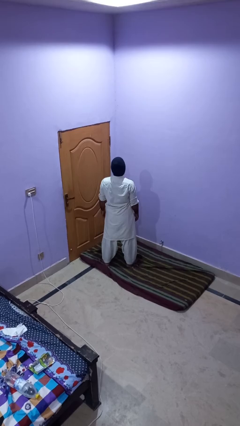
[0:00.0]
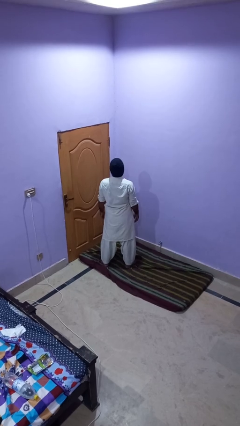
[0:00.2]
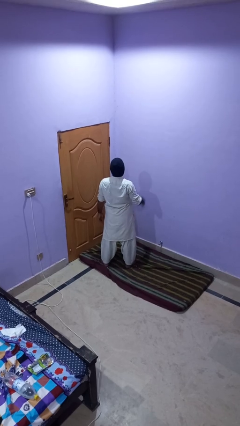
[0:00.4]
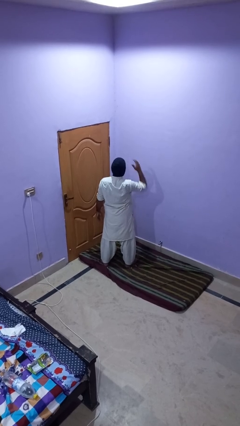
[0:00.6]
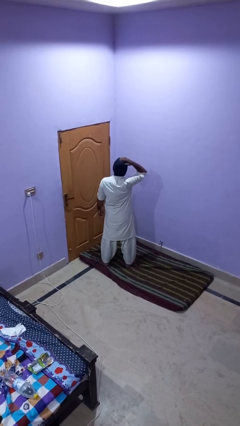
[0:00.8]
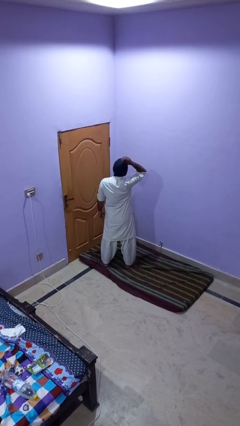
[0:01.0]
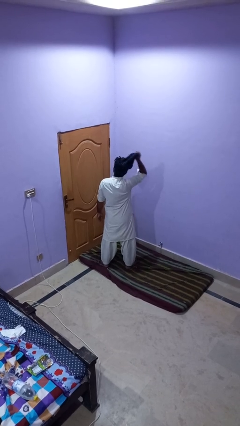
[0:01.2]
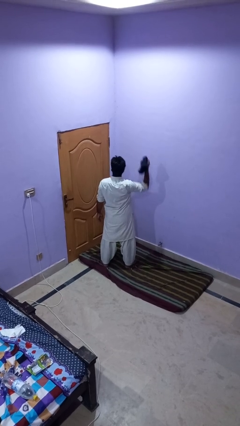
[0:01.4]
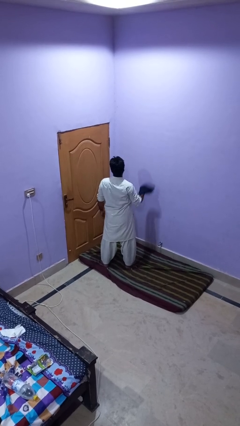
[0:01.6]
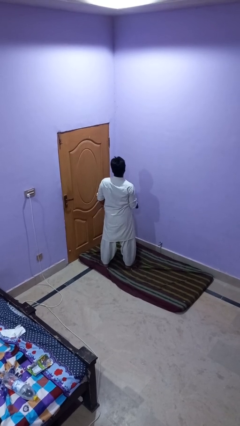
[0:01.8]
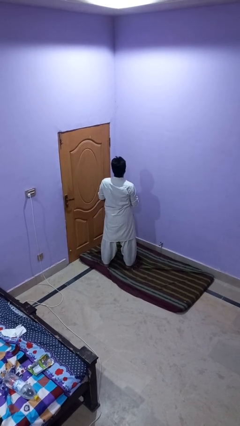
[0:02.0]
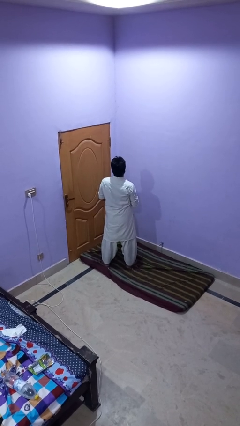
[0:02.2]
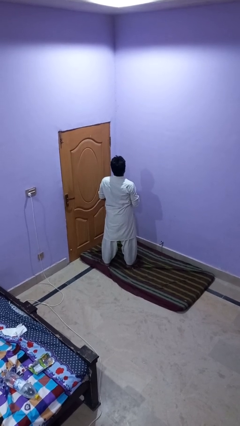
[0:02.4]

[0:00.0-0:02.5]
person takes off hat

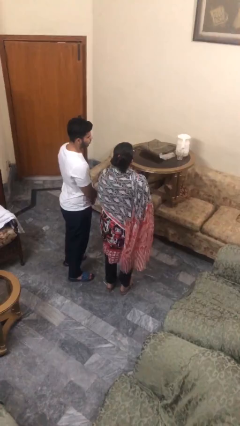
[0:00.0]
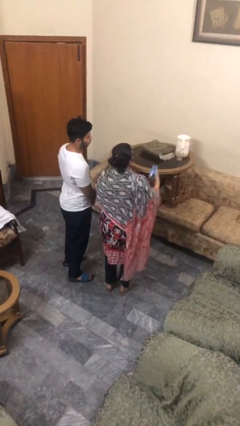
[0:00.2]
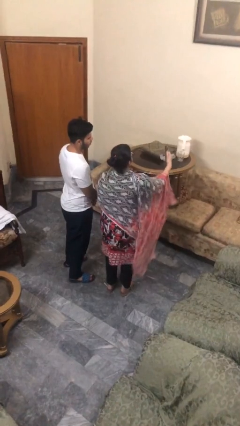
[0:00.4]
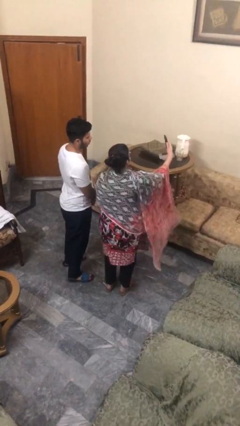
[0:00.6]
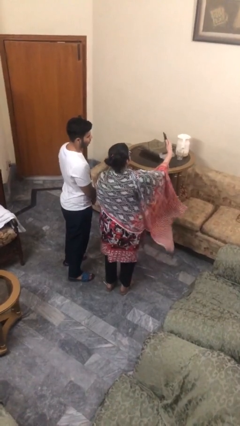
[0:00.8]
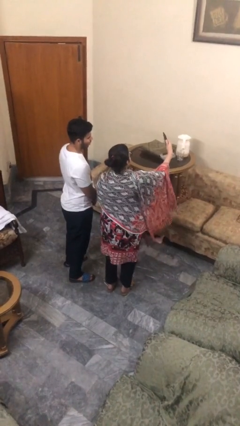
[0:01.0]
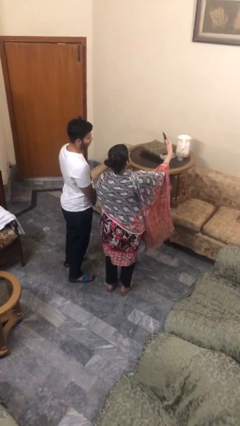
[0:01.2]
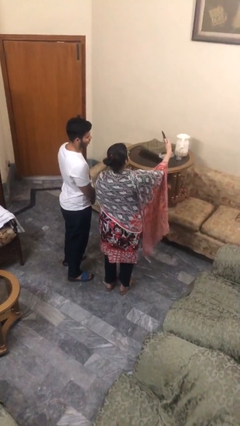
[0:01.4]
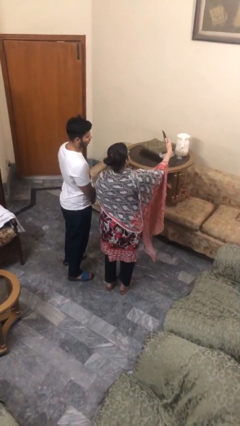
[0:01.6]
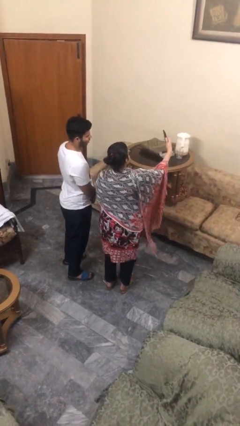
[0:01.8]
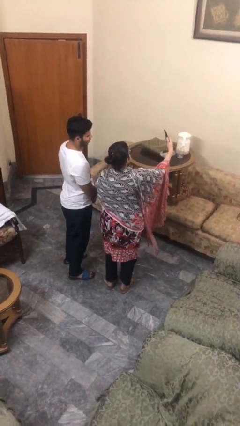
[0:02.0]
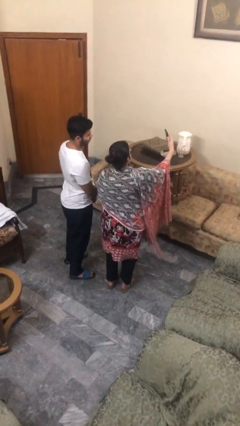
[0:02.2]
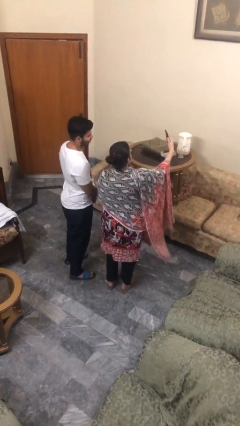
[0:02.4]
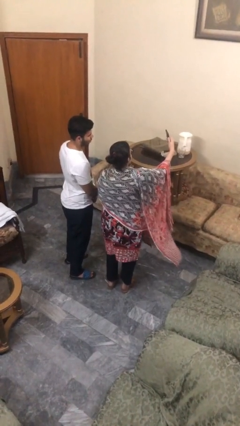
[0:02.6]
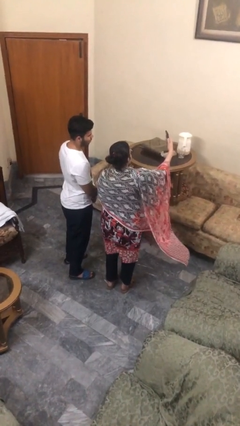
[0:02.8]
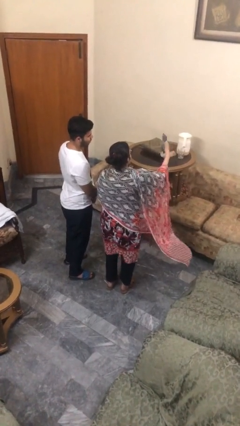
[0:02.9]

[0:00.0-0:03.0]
person takes selfie with person

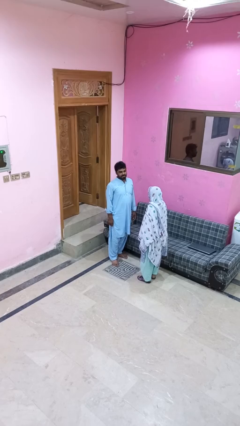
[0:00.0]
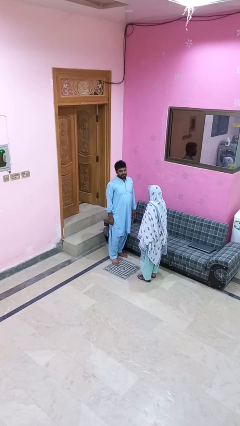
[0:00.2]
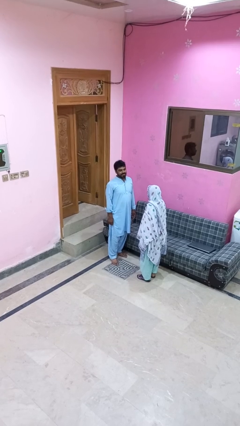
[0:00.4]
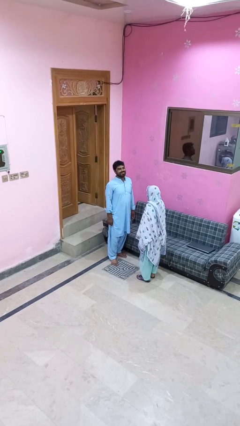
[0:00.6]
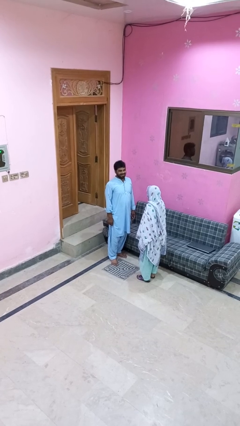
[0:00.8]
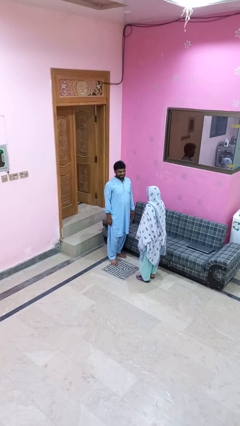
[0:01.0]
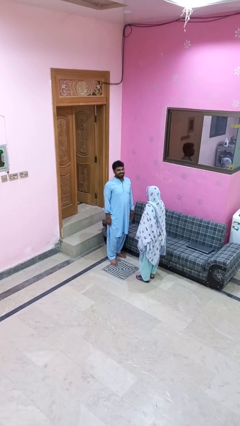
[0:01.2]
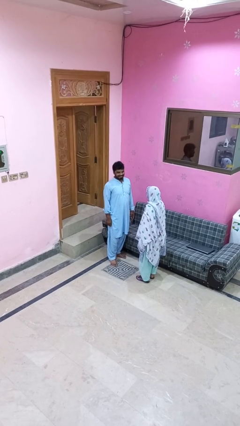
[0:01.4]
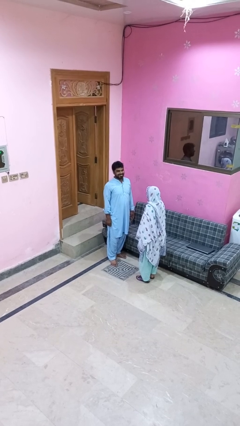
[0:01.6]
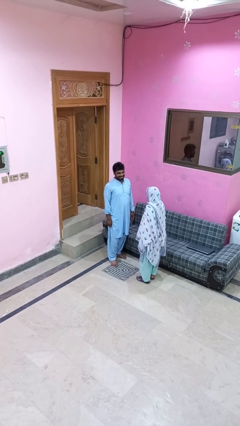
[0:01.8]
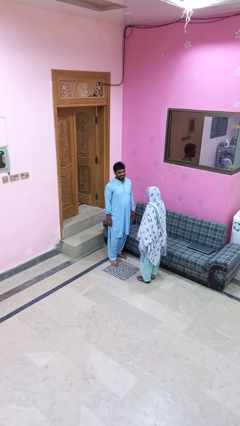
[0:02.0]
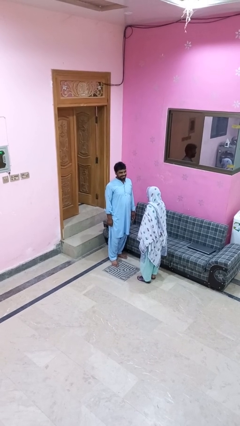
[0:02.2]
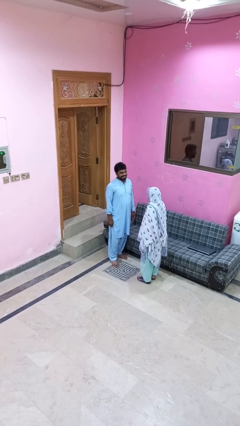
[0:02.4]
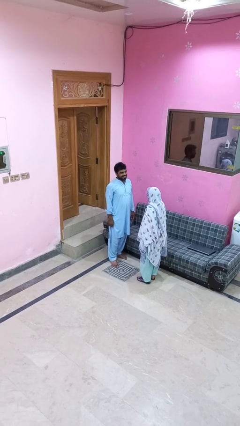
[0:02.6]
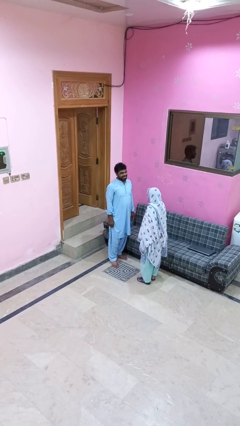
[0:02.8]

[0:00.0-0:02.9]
person laughs with person

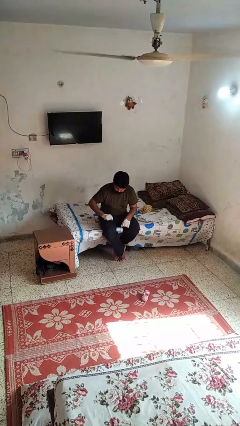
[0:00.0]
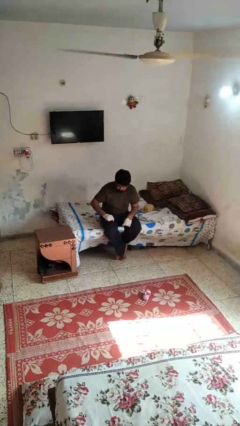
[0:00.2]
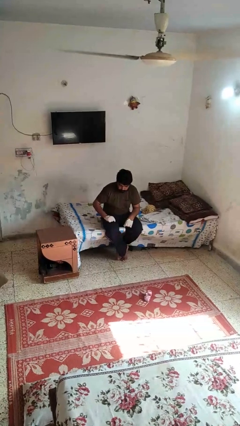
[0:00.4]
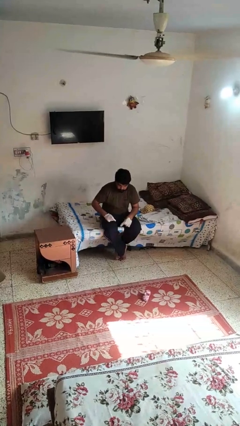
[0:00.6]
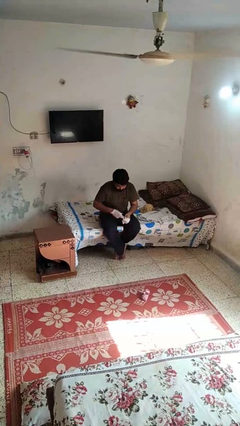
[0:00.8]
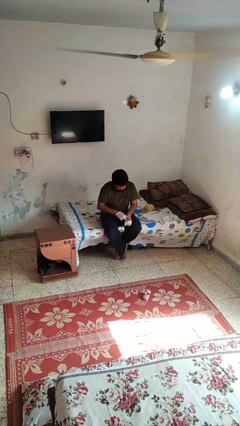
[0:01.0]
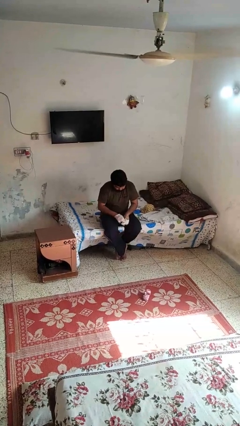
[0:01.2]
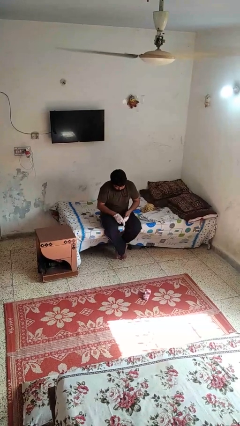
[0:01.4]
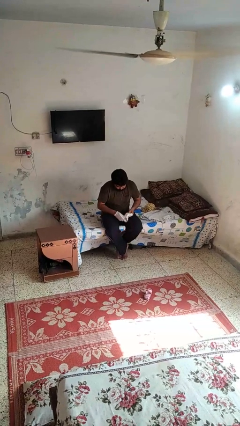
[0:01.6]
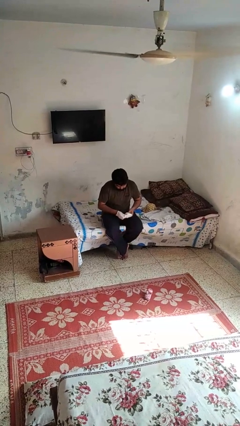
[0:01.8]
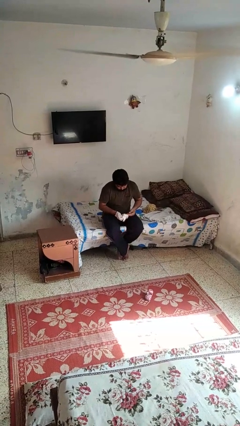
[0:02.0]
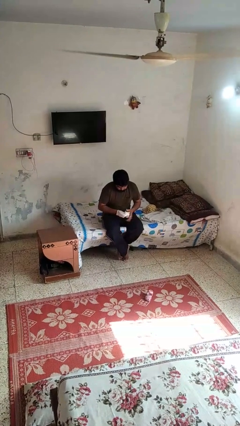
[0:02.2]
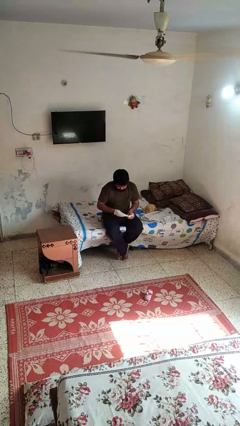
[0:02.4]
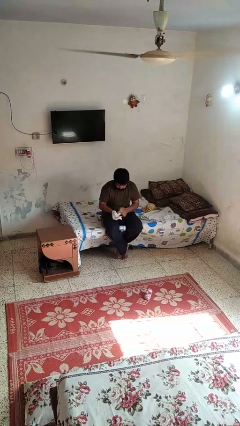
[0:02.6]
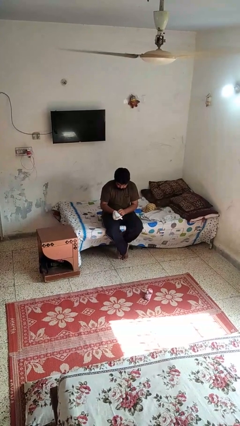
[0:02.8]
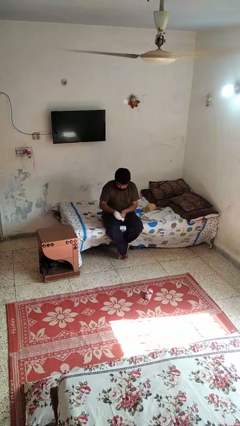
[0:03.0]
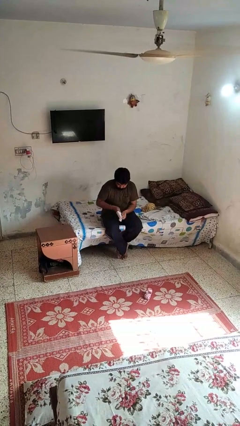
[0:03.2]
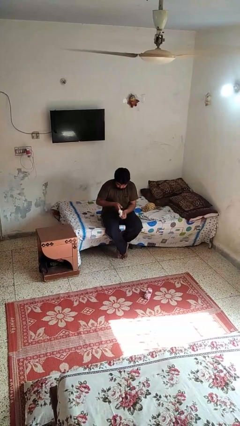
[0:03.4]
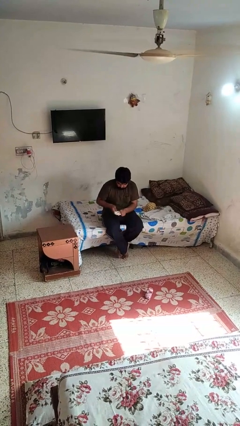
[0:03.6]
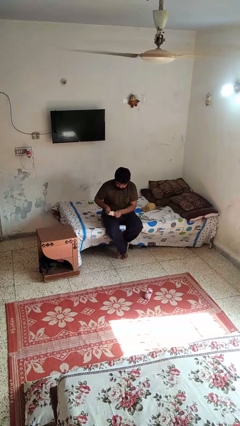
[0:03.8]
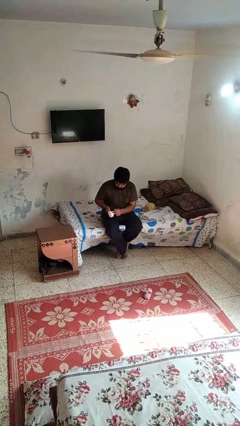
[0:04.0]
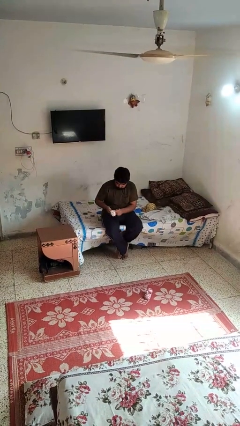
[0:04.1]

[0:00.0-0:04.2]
person takes off gloves

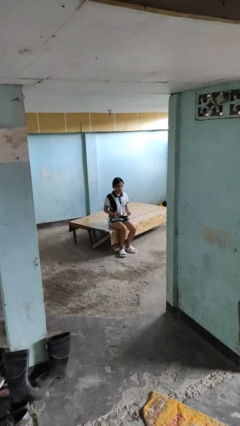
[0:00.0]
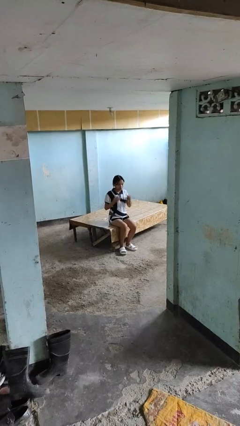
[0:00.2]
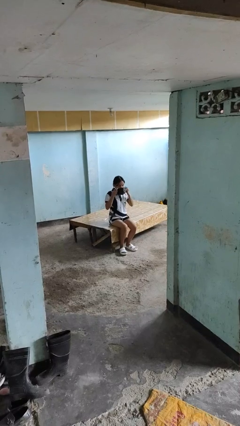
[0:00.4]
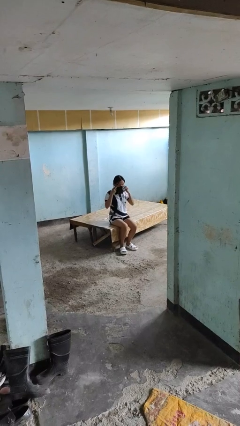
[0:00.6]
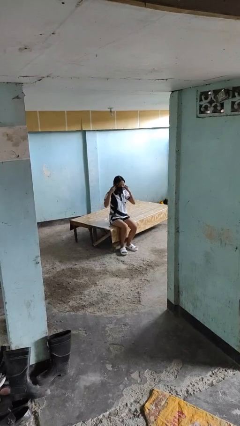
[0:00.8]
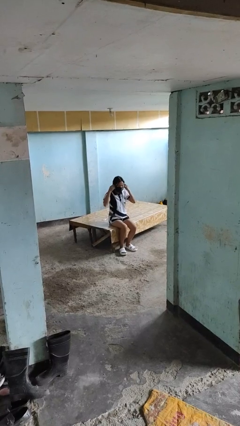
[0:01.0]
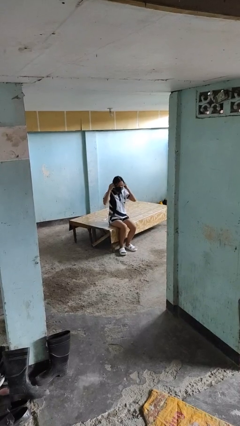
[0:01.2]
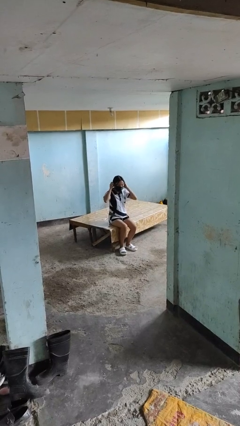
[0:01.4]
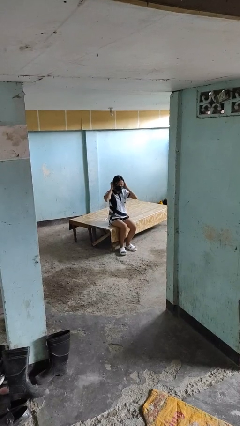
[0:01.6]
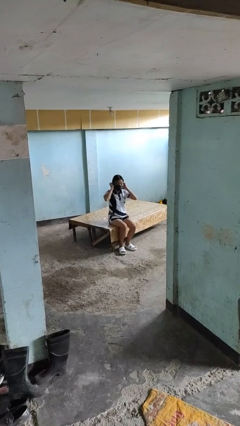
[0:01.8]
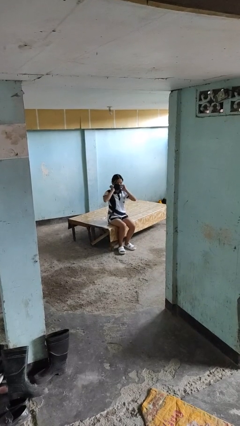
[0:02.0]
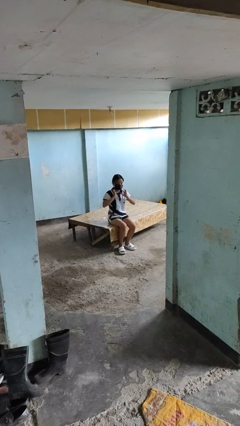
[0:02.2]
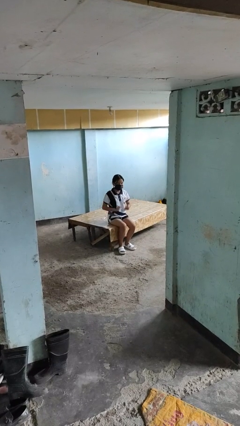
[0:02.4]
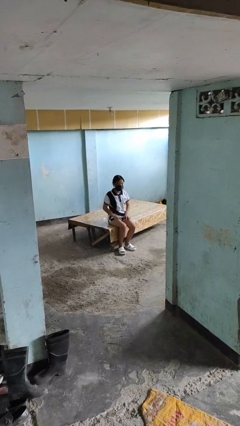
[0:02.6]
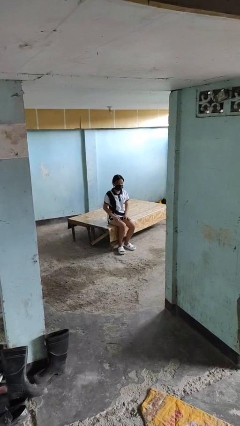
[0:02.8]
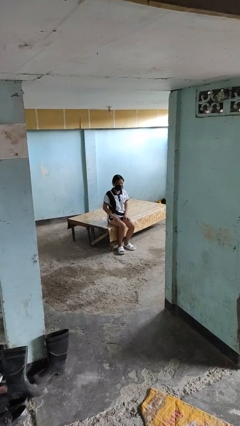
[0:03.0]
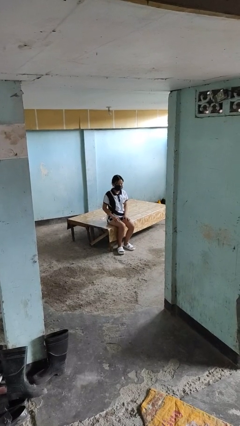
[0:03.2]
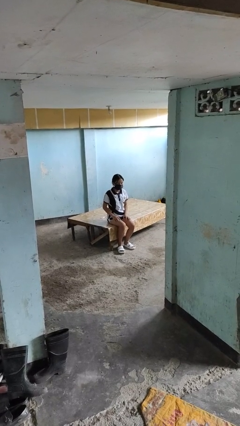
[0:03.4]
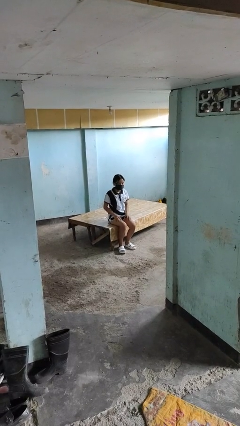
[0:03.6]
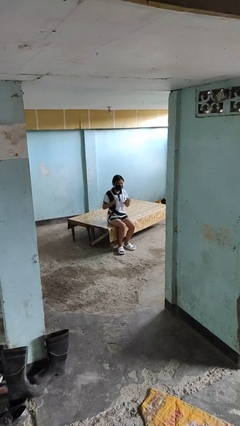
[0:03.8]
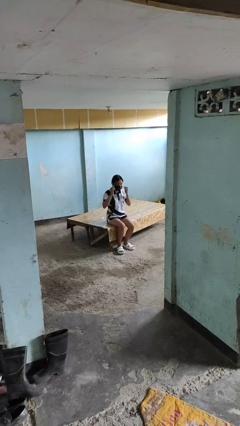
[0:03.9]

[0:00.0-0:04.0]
person puts on facemask

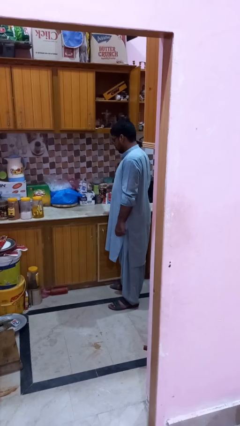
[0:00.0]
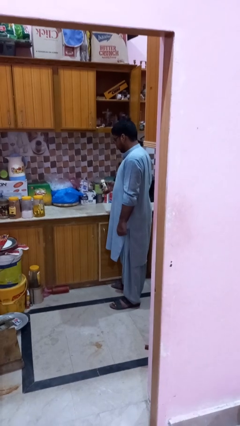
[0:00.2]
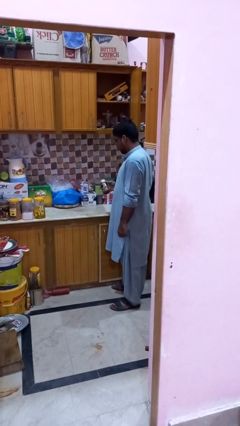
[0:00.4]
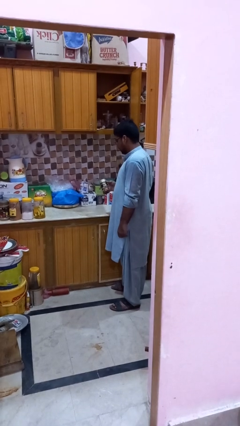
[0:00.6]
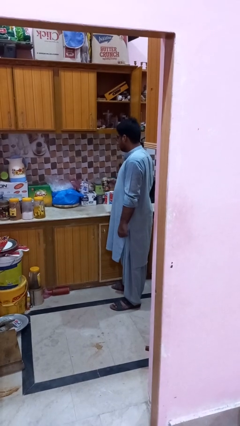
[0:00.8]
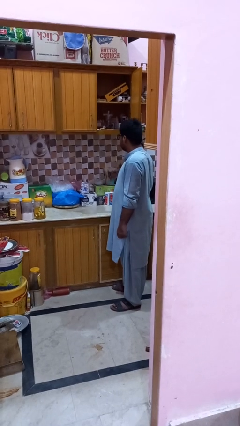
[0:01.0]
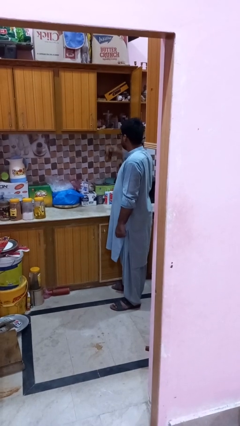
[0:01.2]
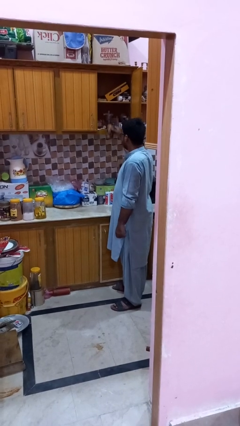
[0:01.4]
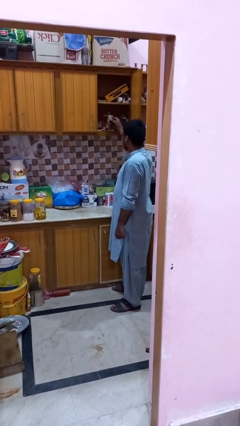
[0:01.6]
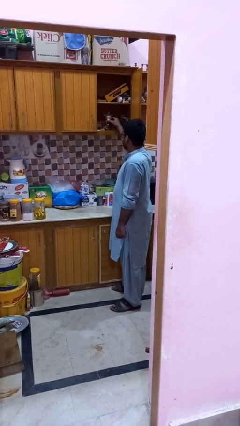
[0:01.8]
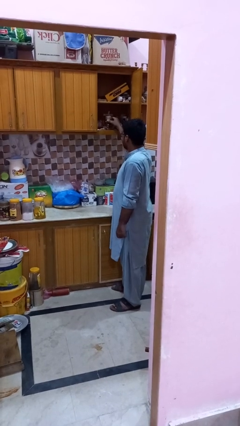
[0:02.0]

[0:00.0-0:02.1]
person puts down object into cabinet
